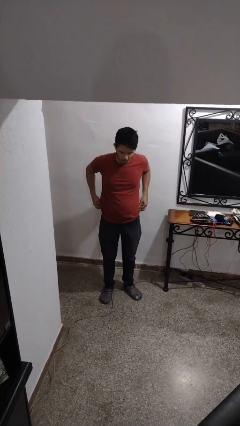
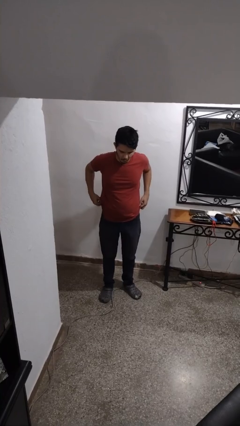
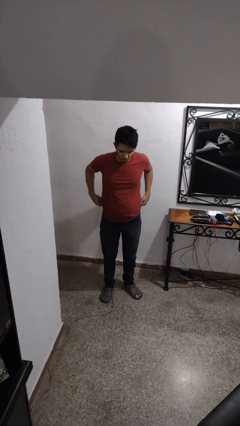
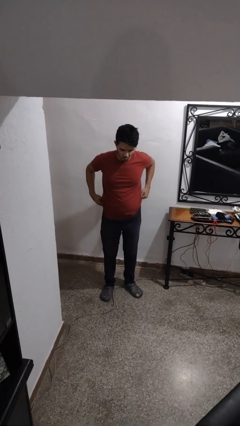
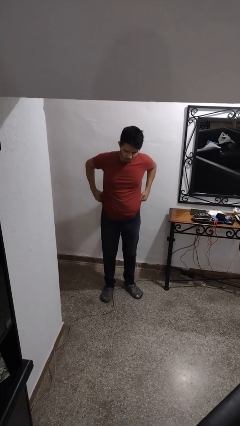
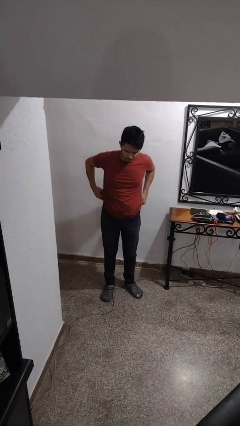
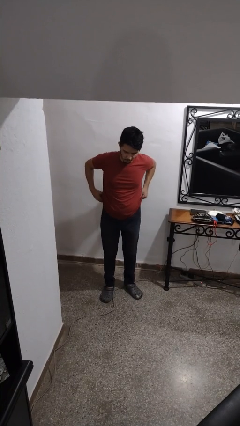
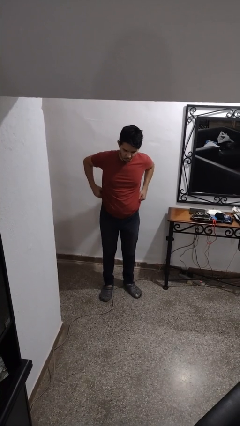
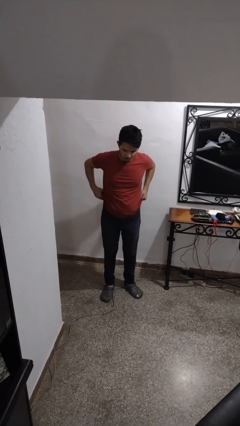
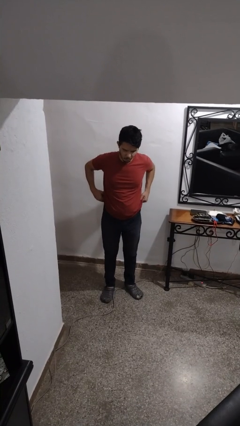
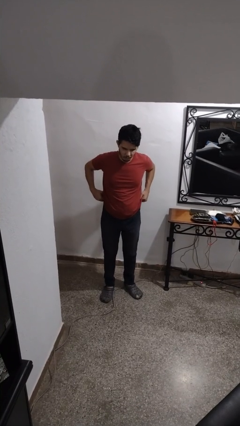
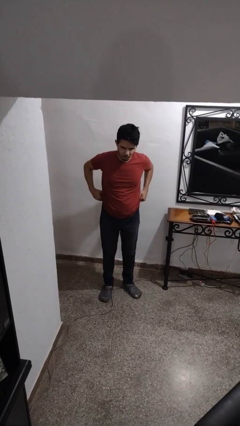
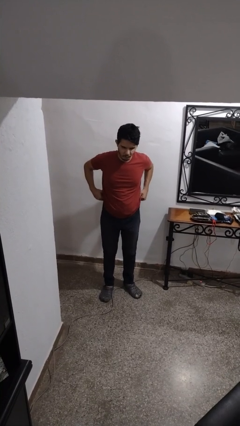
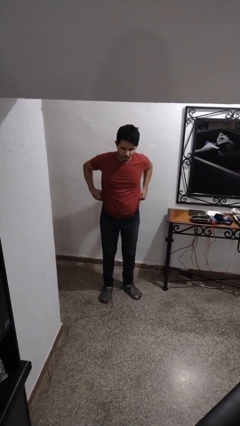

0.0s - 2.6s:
person hikes up pants

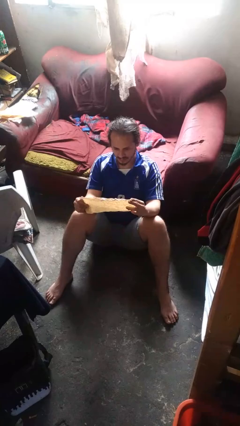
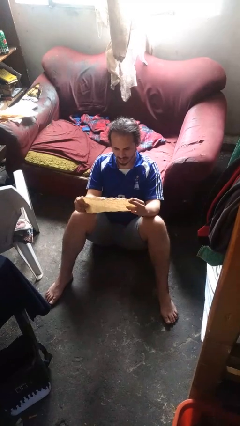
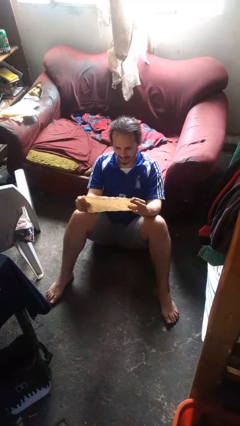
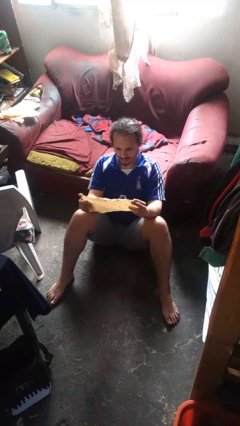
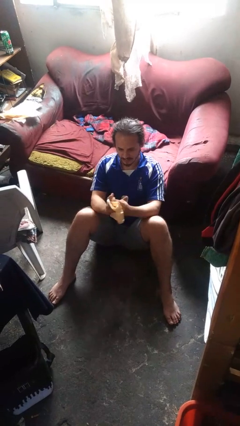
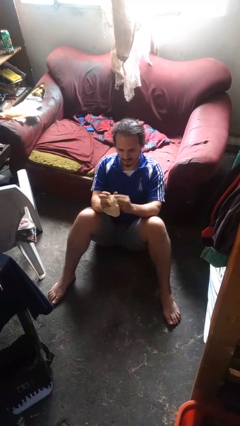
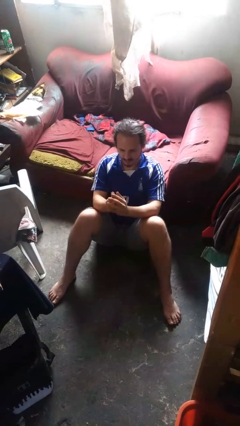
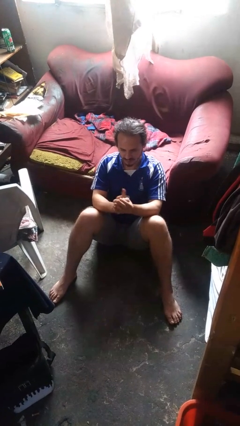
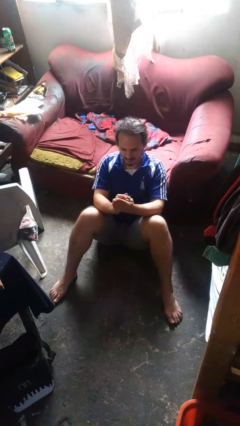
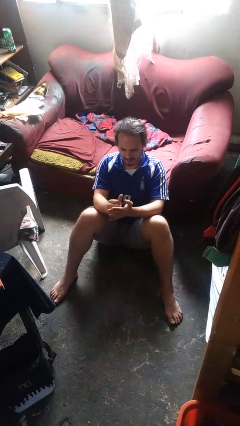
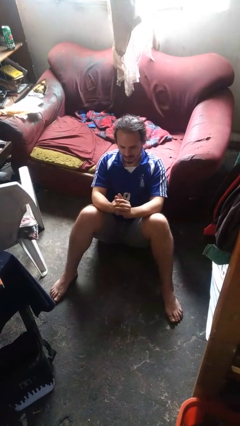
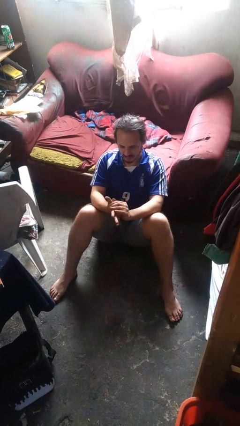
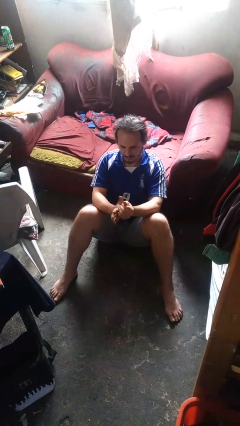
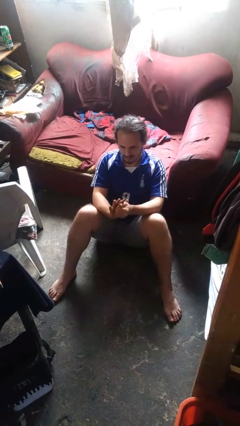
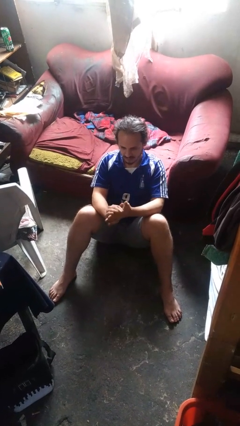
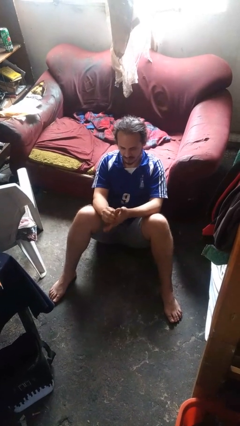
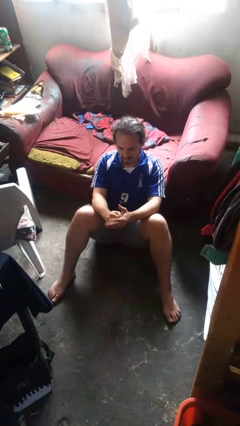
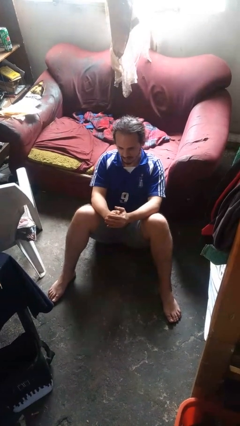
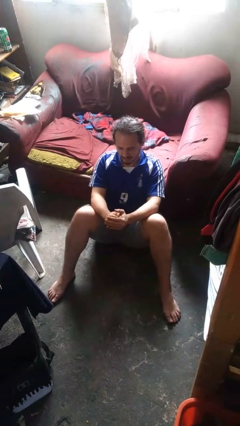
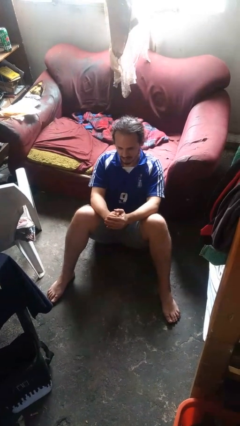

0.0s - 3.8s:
person crumples paper

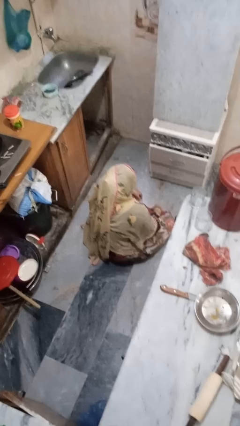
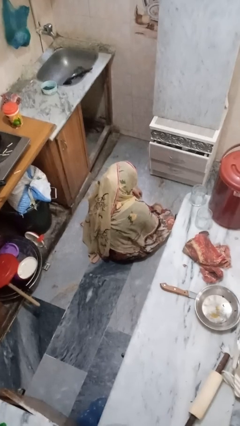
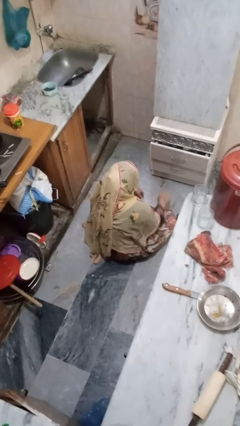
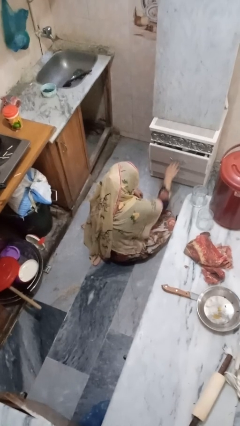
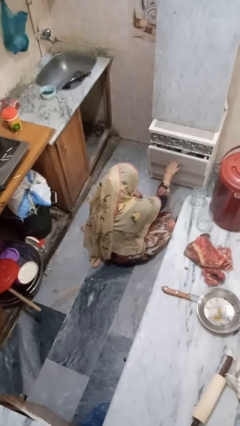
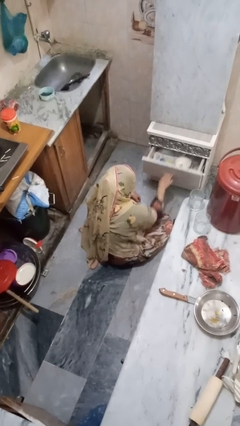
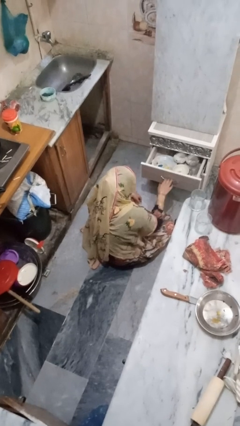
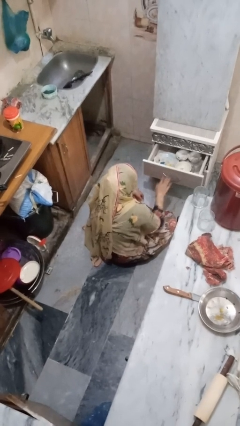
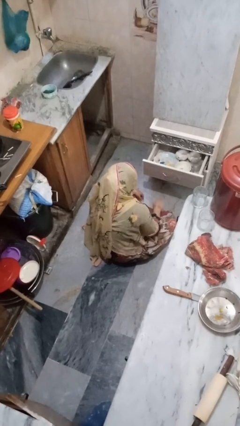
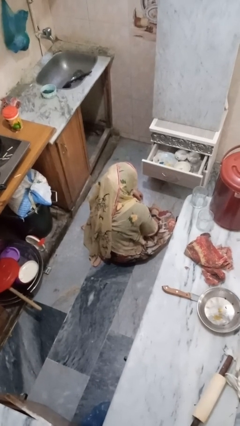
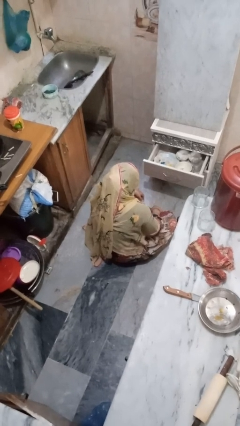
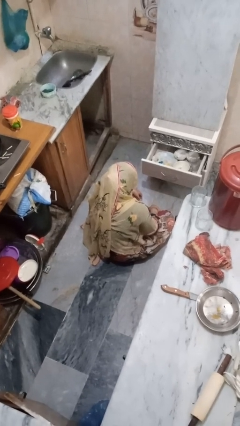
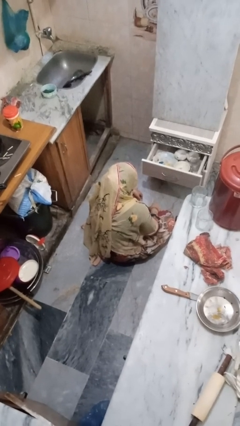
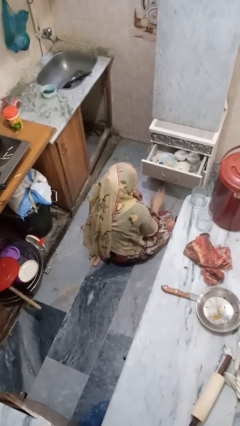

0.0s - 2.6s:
person opens kitchen drawer

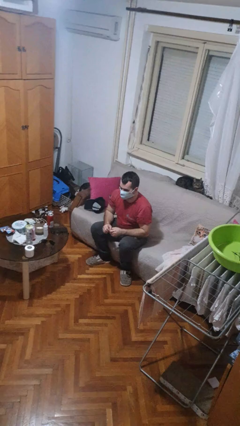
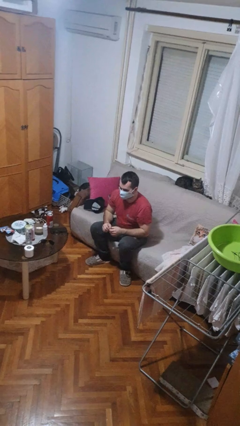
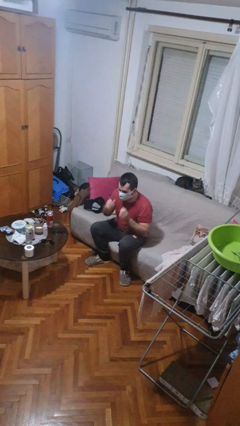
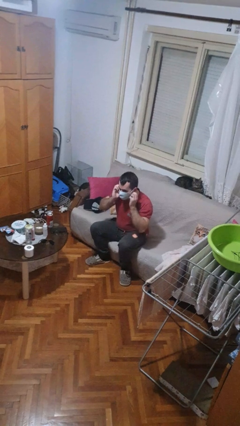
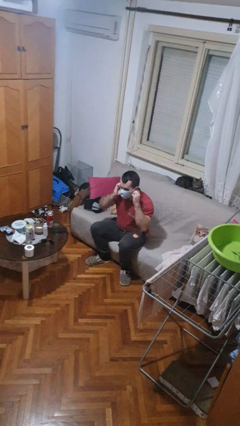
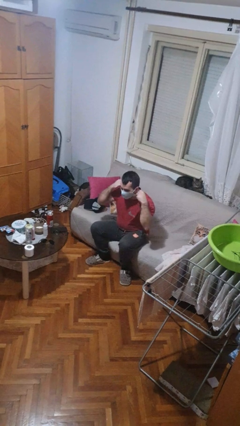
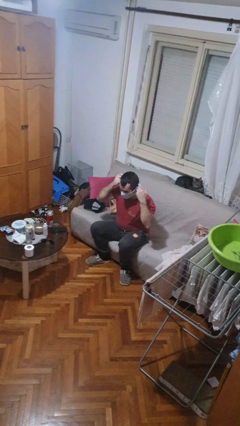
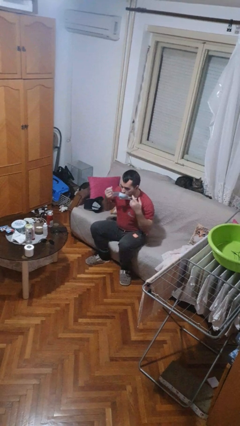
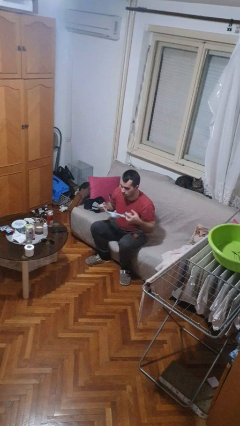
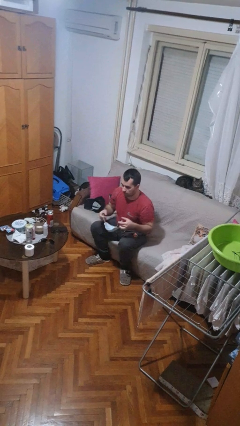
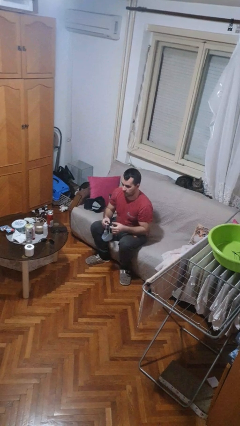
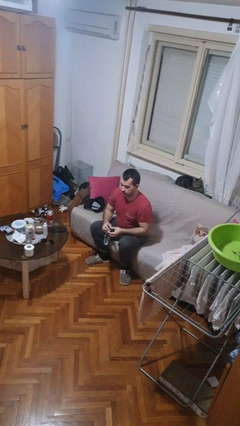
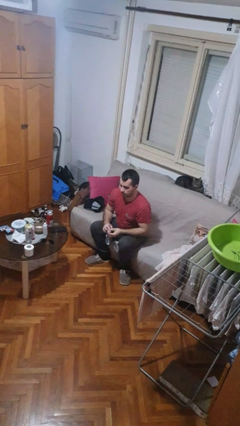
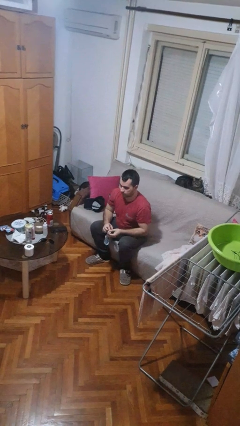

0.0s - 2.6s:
person takes off facemask

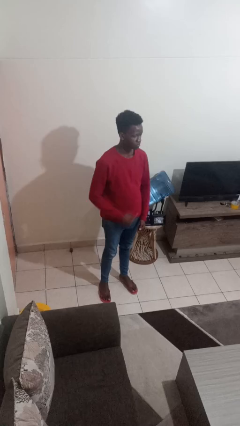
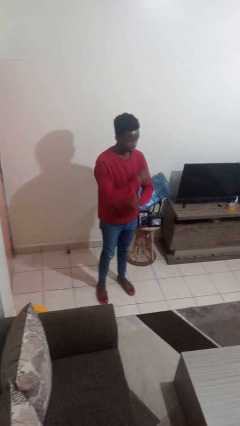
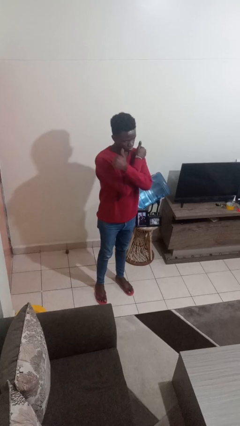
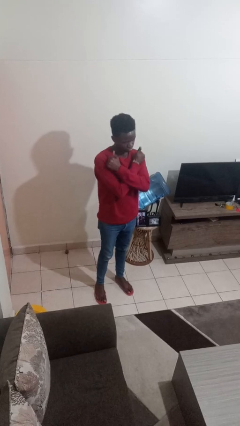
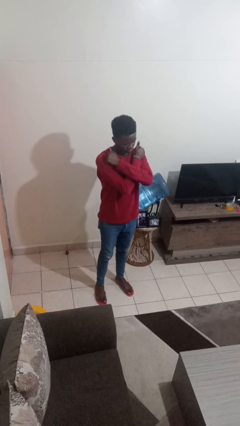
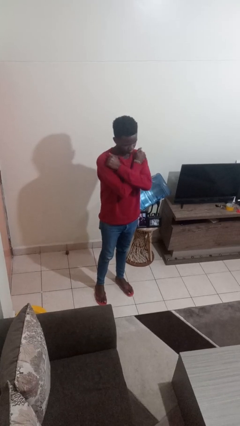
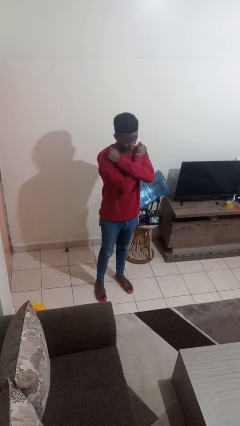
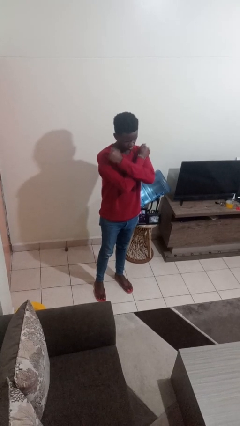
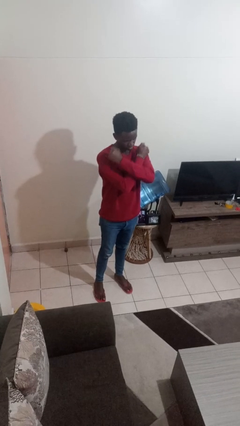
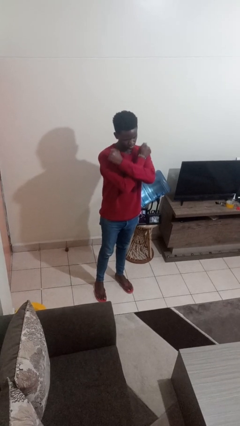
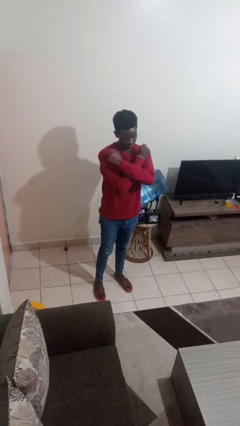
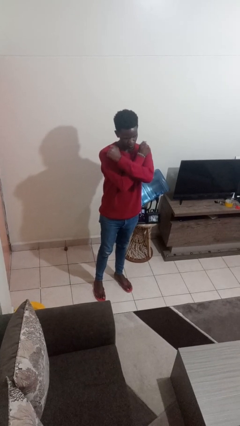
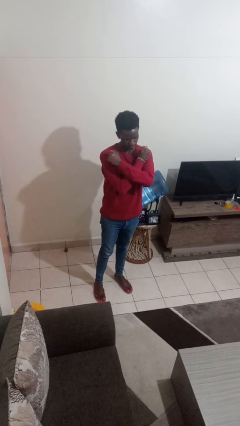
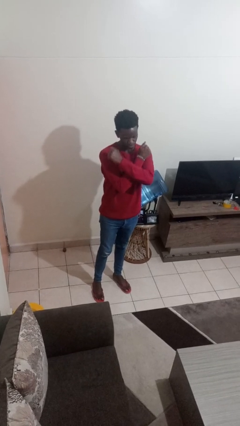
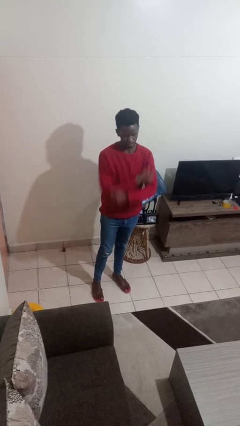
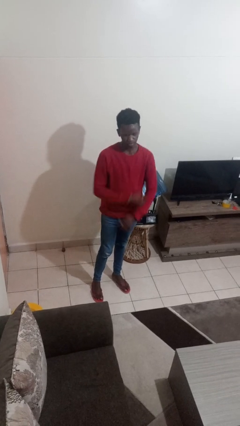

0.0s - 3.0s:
person gestures arms x

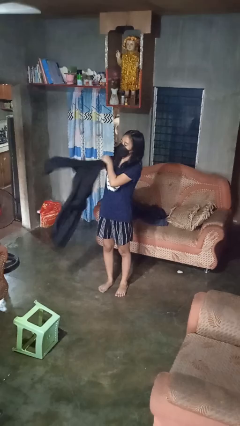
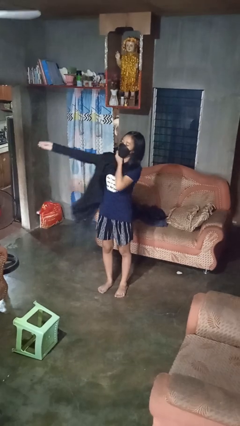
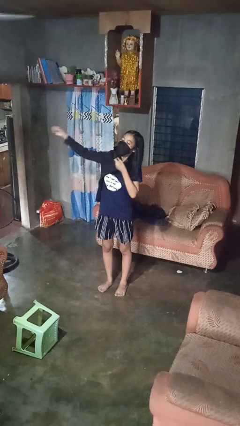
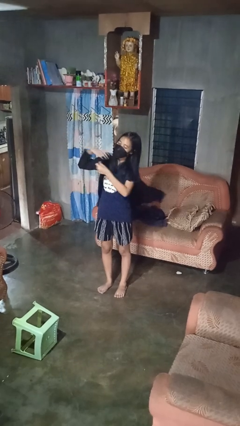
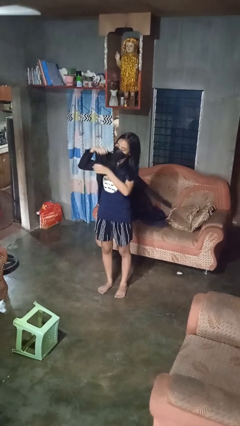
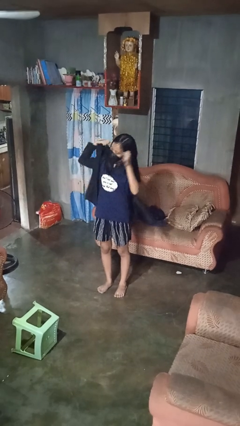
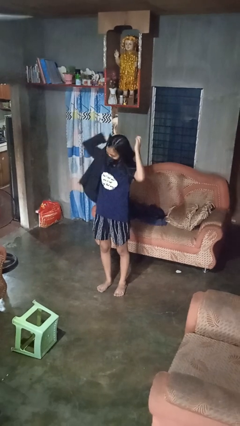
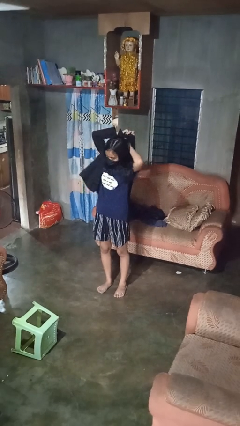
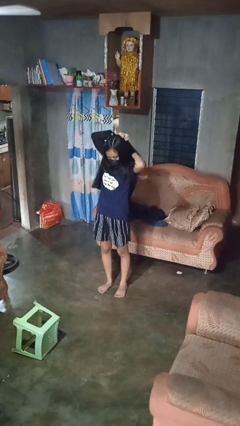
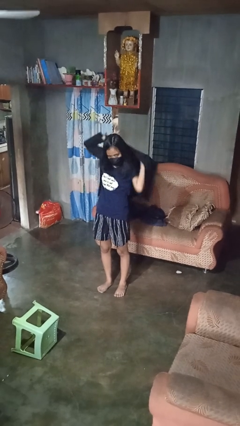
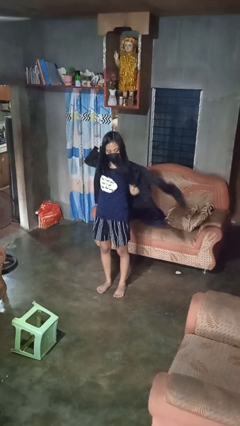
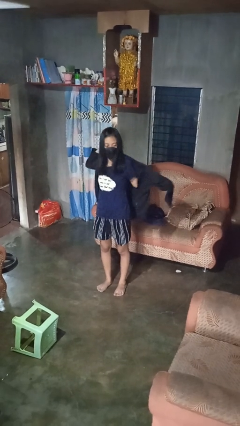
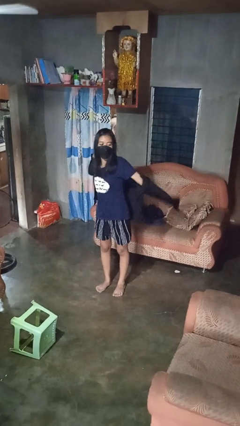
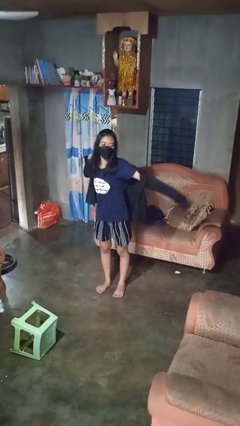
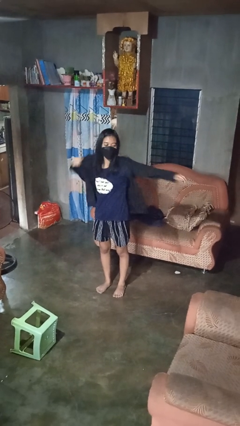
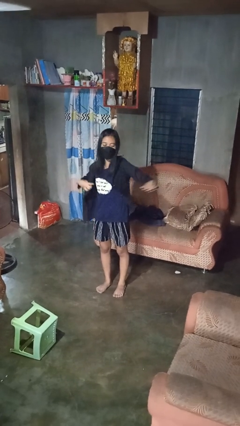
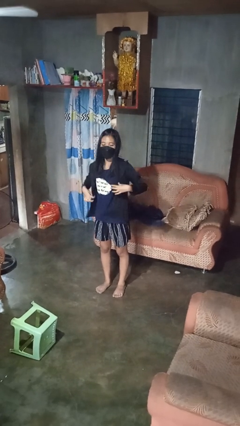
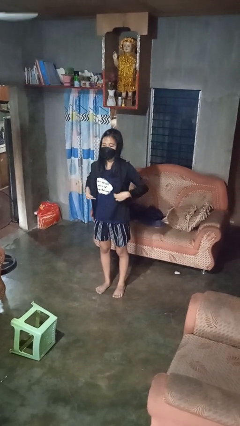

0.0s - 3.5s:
person puts on shirt
